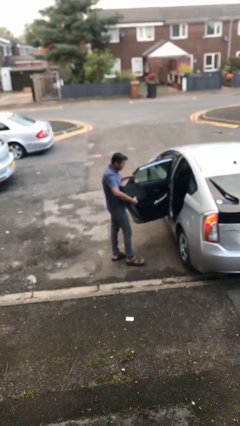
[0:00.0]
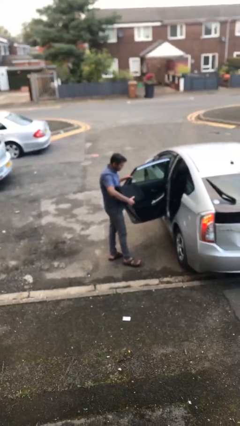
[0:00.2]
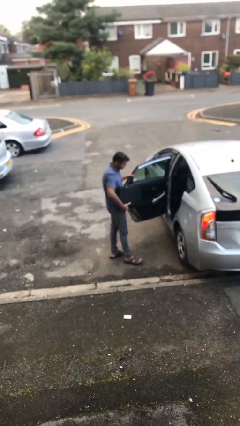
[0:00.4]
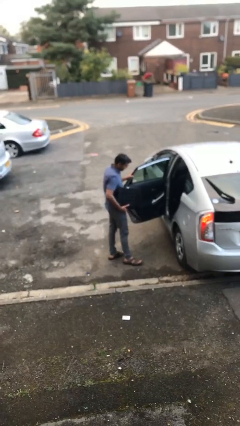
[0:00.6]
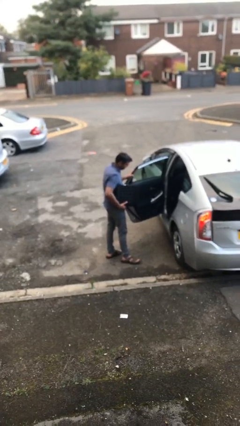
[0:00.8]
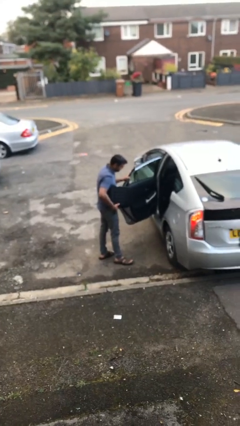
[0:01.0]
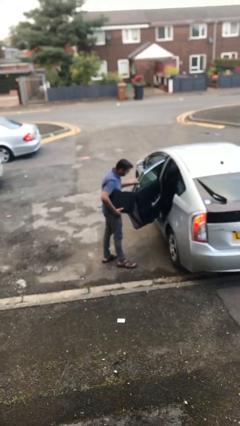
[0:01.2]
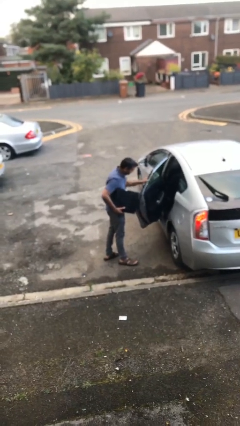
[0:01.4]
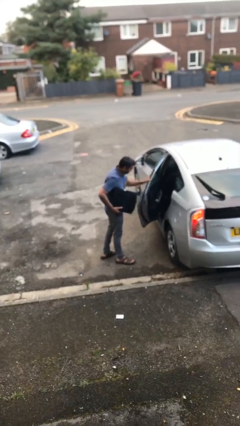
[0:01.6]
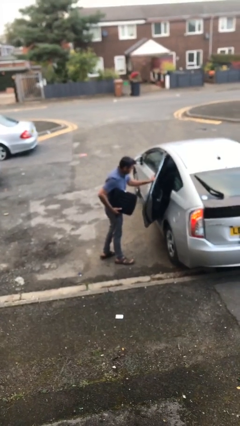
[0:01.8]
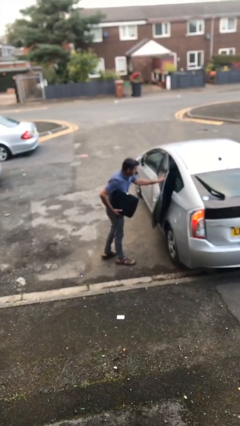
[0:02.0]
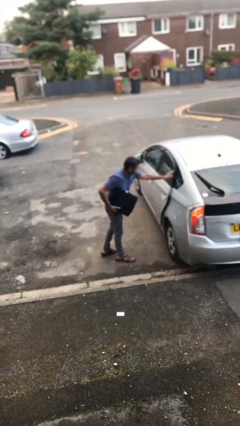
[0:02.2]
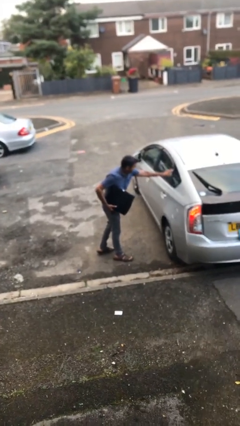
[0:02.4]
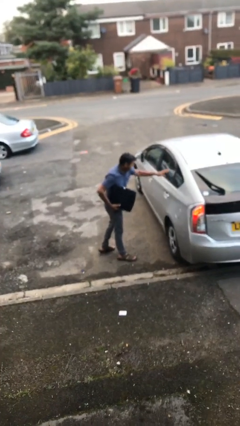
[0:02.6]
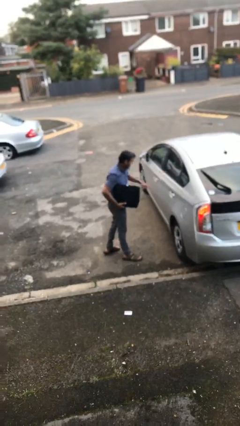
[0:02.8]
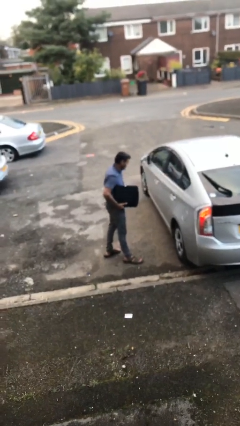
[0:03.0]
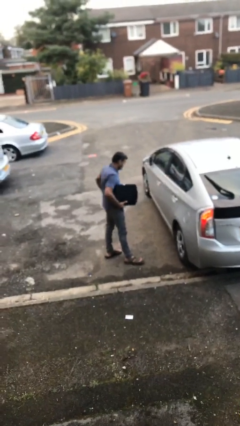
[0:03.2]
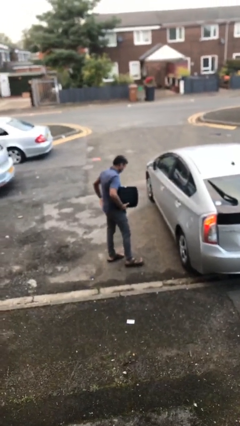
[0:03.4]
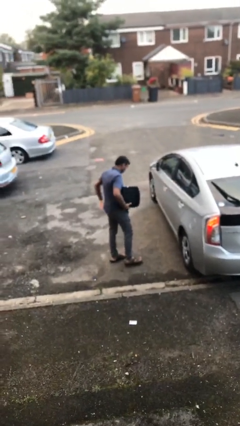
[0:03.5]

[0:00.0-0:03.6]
person closes car door

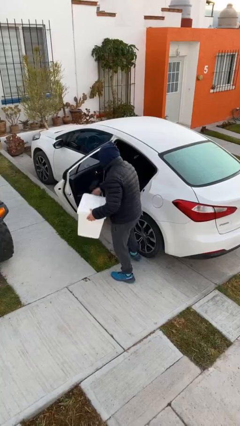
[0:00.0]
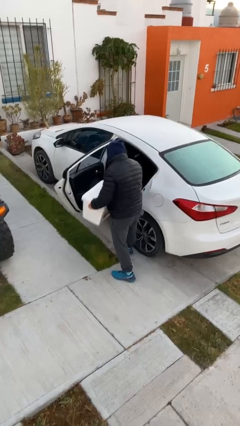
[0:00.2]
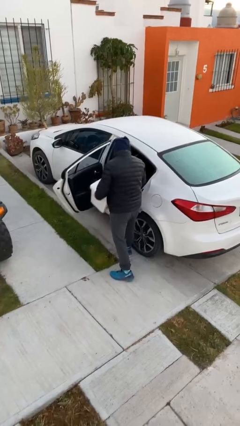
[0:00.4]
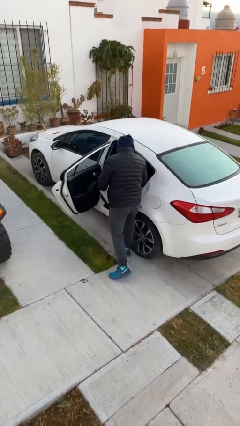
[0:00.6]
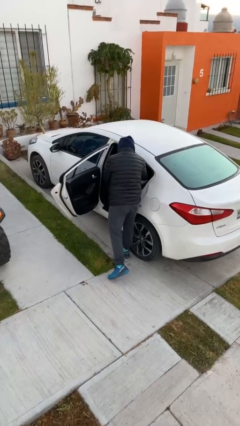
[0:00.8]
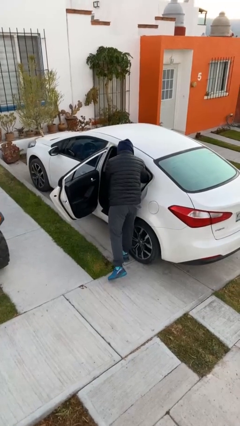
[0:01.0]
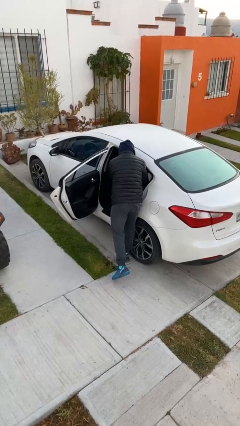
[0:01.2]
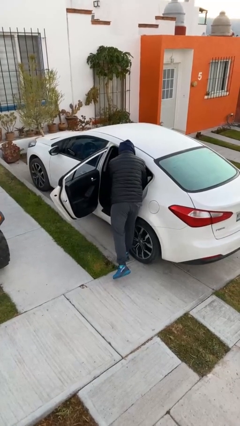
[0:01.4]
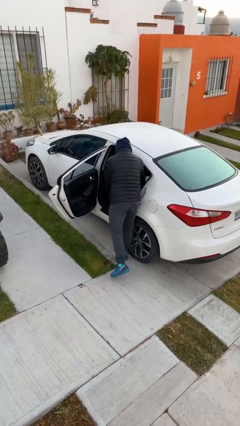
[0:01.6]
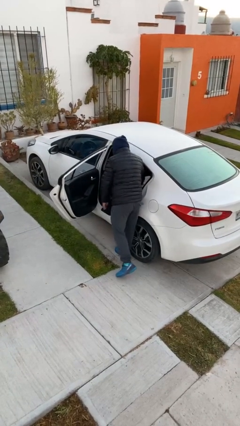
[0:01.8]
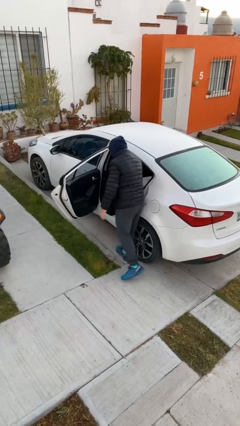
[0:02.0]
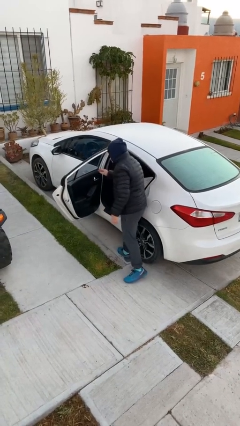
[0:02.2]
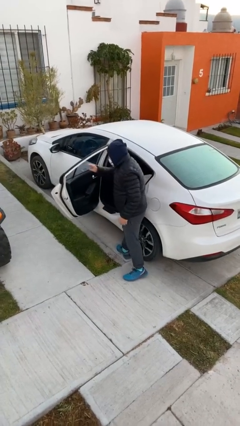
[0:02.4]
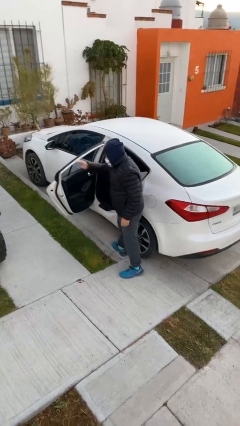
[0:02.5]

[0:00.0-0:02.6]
person loads car

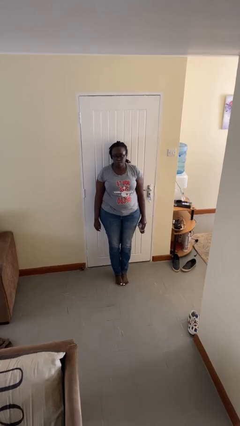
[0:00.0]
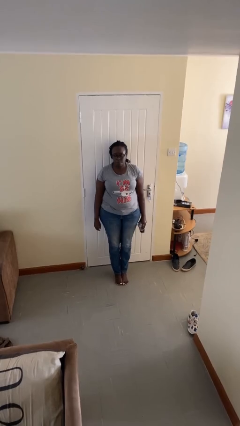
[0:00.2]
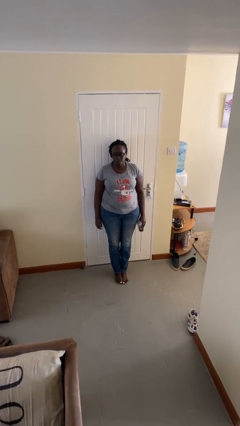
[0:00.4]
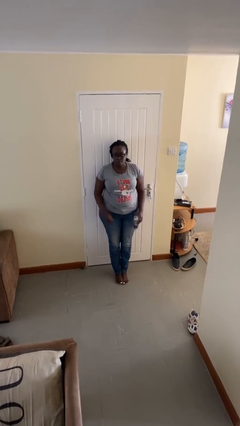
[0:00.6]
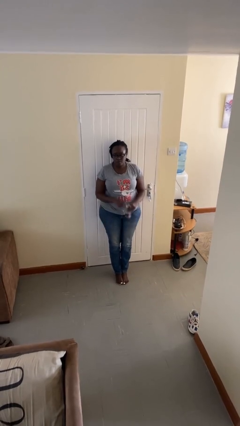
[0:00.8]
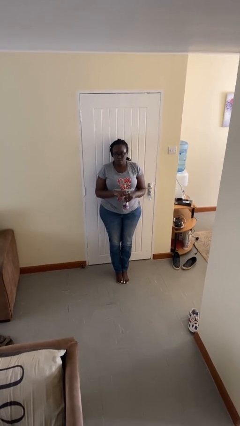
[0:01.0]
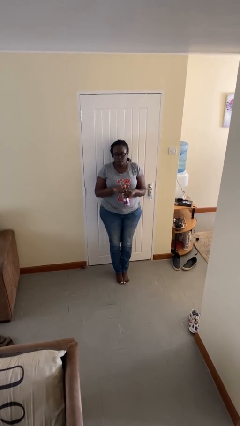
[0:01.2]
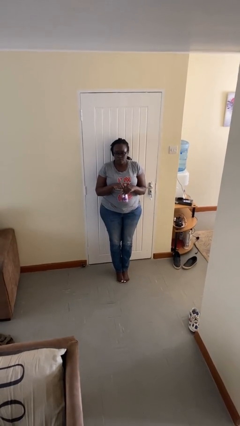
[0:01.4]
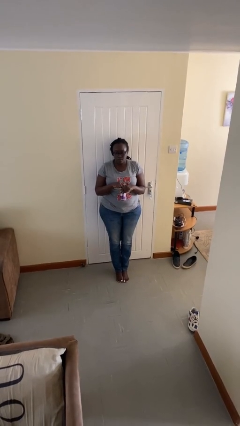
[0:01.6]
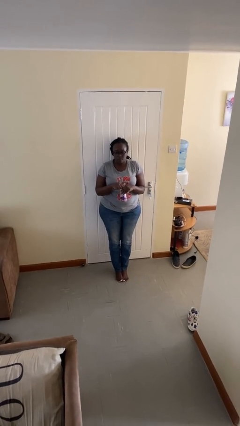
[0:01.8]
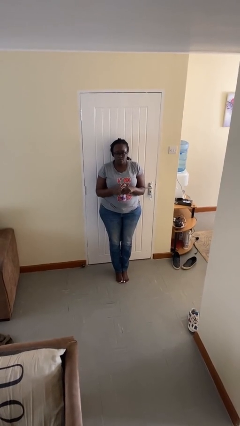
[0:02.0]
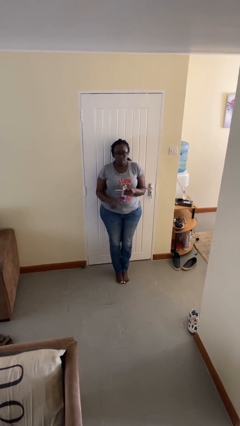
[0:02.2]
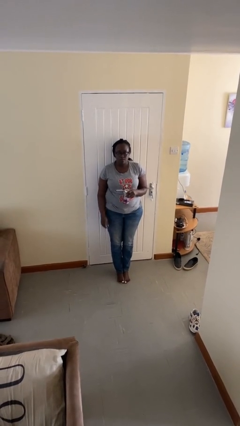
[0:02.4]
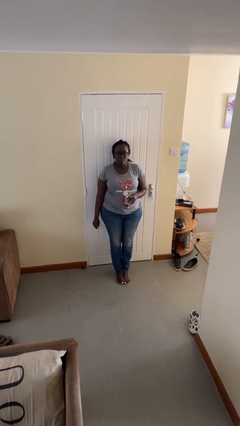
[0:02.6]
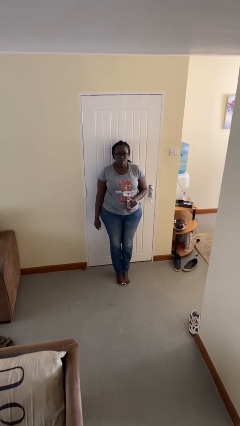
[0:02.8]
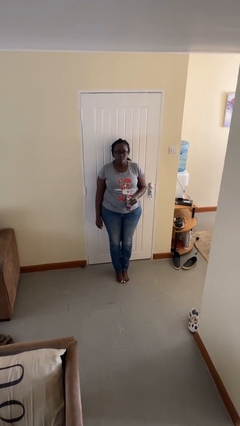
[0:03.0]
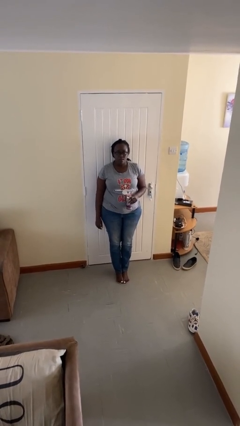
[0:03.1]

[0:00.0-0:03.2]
person opens beverage can

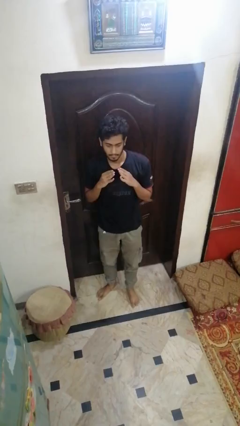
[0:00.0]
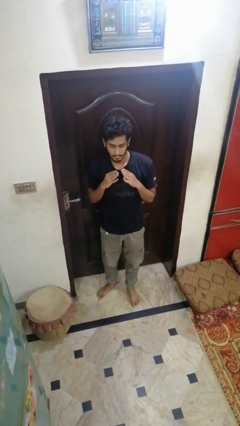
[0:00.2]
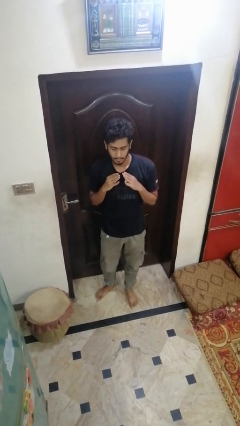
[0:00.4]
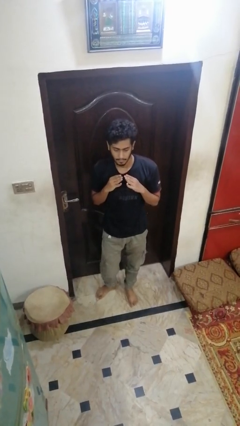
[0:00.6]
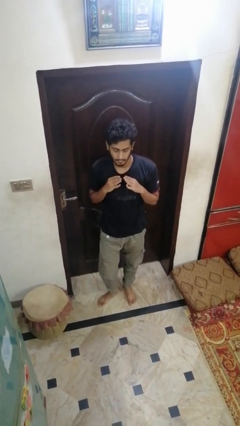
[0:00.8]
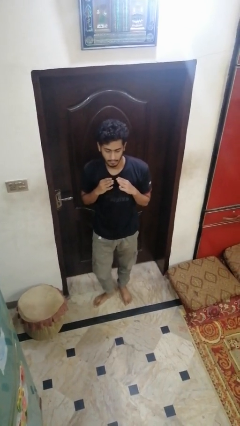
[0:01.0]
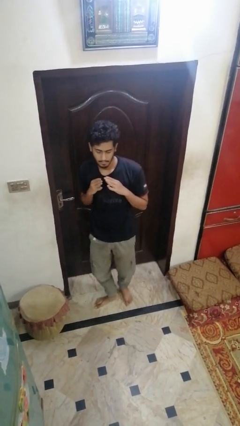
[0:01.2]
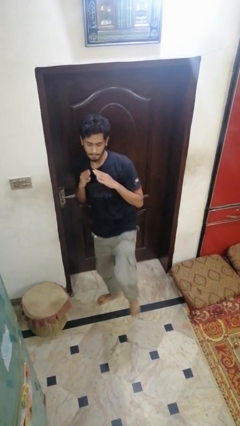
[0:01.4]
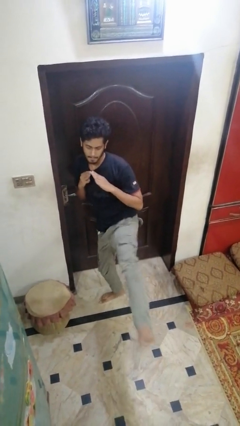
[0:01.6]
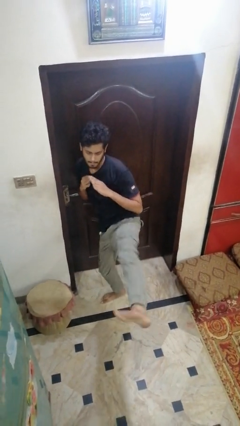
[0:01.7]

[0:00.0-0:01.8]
person flosses

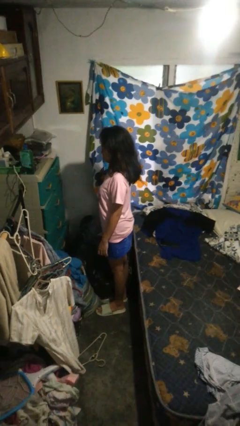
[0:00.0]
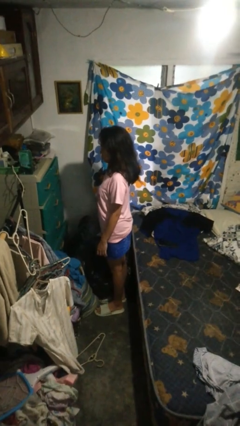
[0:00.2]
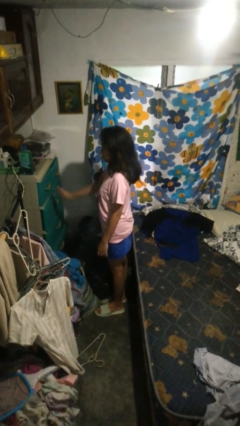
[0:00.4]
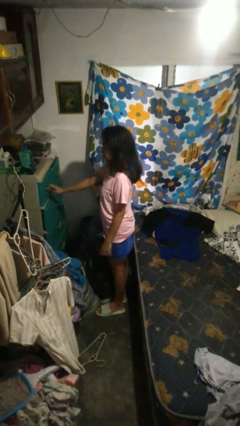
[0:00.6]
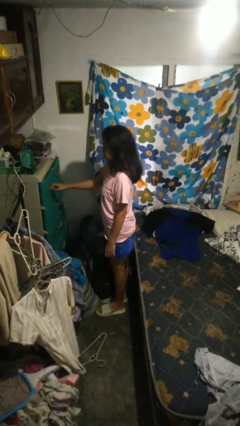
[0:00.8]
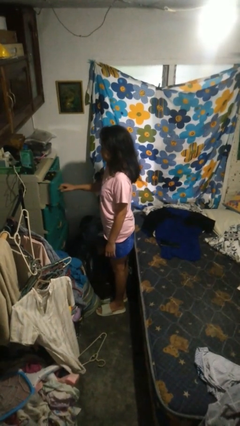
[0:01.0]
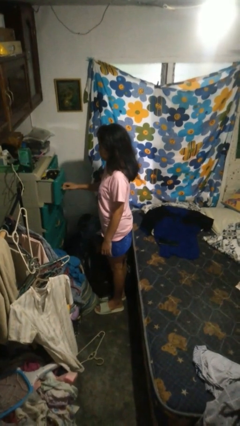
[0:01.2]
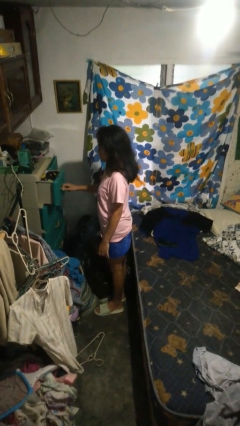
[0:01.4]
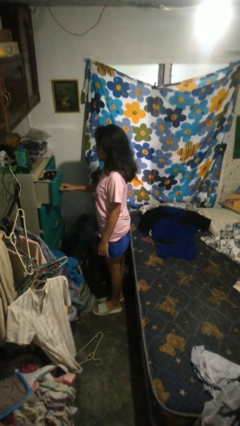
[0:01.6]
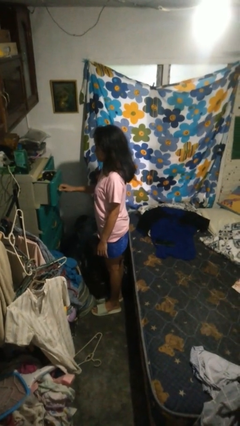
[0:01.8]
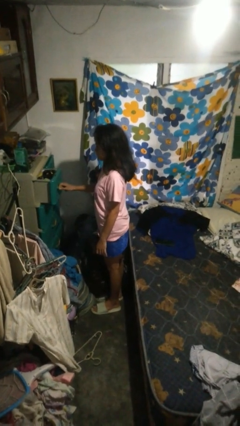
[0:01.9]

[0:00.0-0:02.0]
person opens dresser drawer

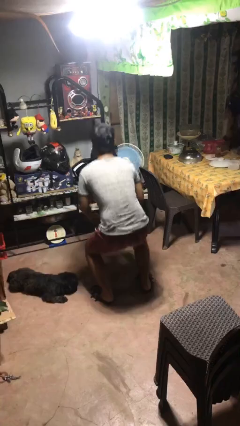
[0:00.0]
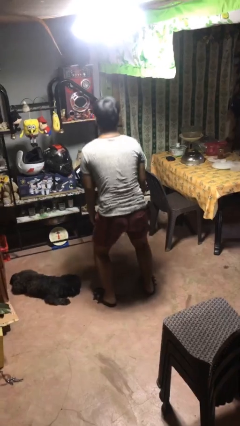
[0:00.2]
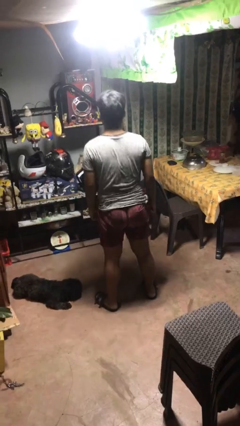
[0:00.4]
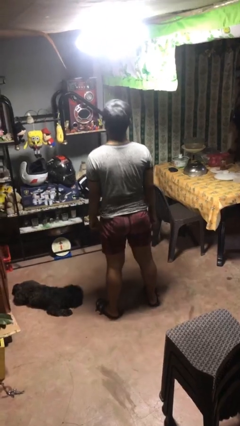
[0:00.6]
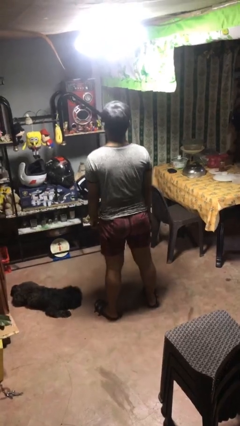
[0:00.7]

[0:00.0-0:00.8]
person stands up

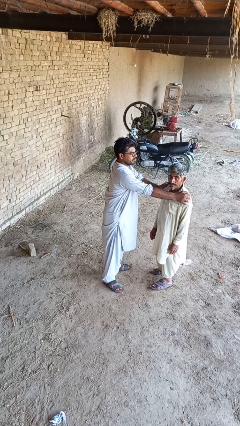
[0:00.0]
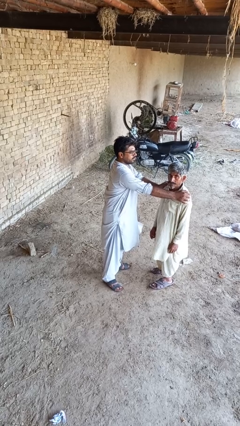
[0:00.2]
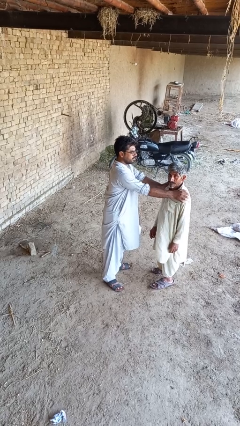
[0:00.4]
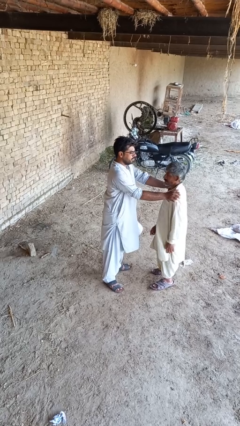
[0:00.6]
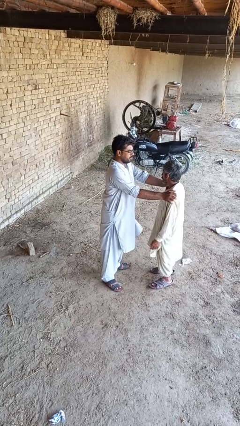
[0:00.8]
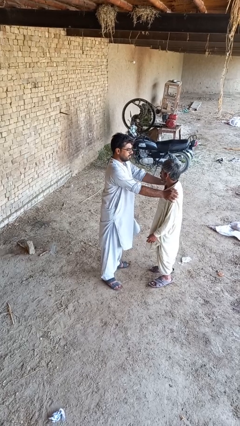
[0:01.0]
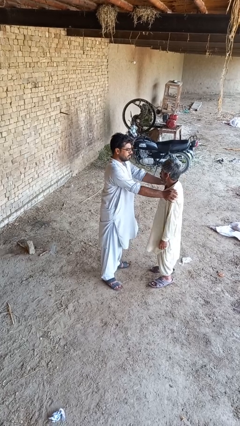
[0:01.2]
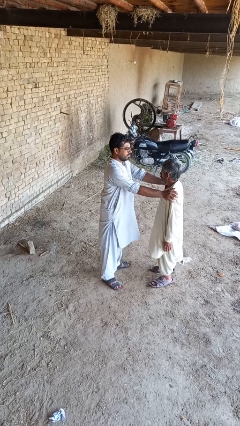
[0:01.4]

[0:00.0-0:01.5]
person spins person around

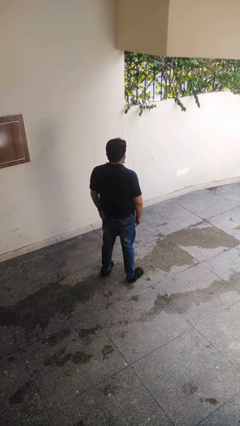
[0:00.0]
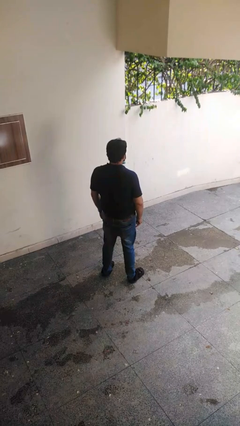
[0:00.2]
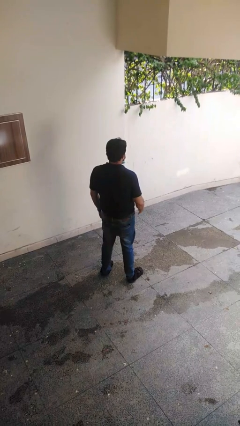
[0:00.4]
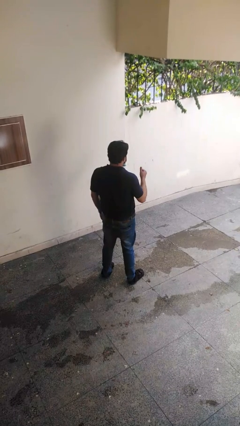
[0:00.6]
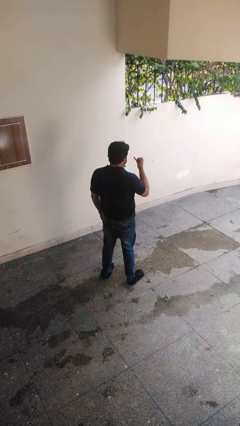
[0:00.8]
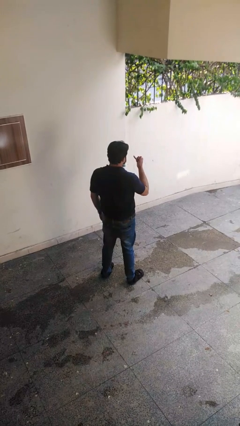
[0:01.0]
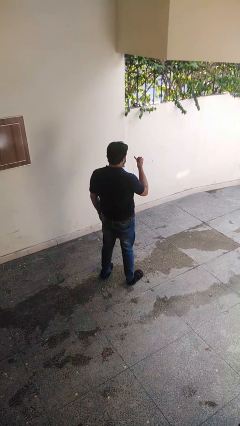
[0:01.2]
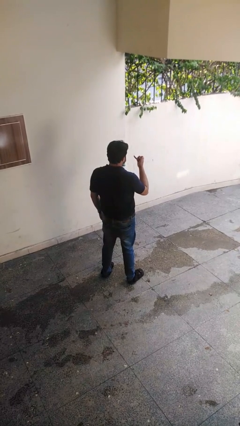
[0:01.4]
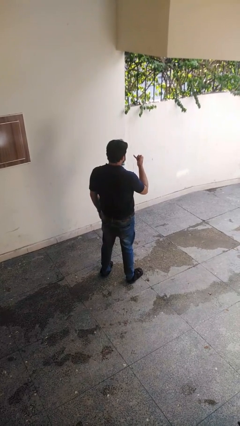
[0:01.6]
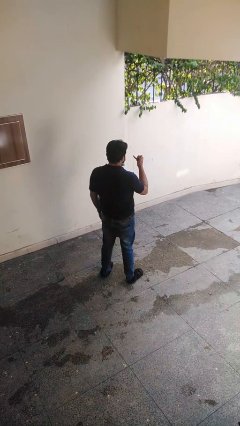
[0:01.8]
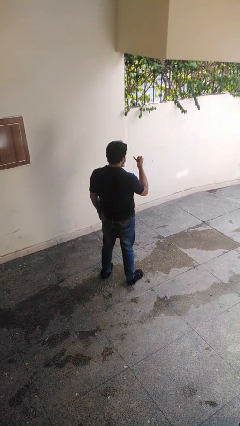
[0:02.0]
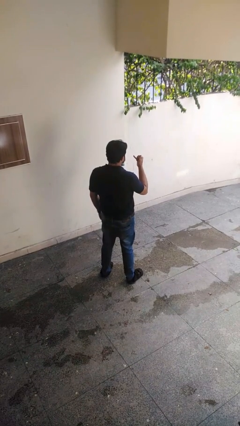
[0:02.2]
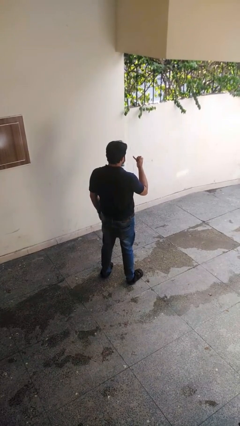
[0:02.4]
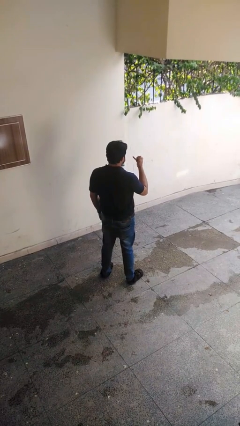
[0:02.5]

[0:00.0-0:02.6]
person gestures hang loose
